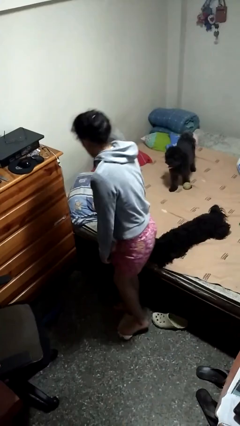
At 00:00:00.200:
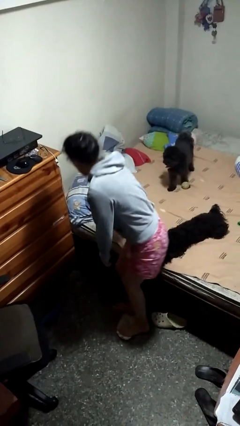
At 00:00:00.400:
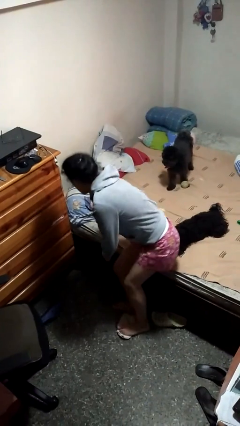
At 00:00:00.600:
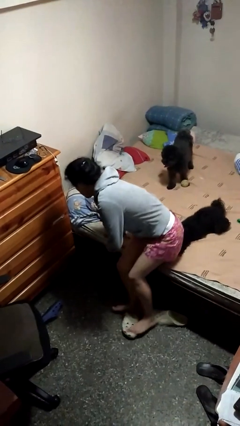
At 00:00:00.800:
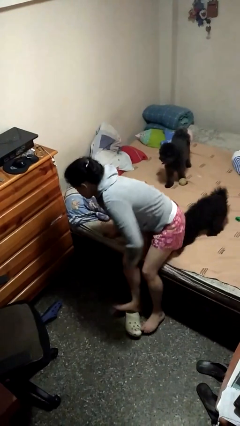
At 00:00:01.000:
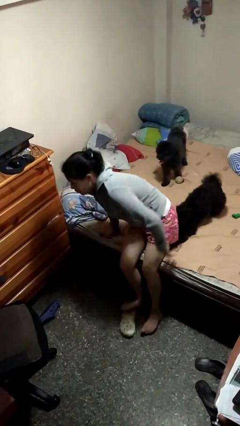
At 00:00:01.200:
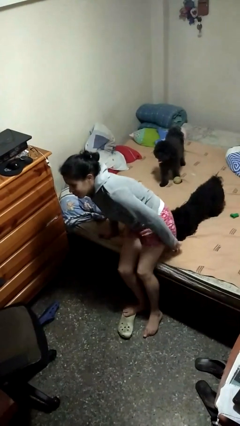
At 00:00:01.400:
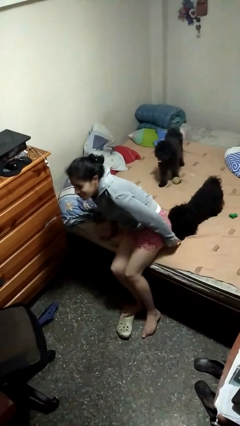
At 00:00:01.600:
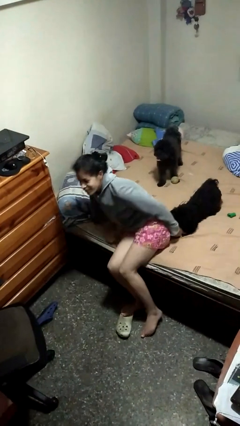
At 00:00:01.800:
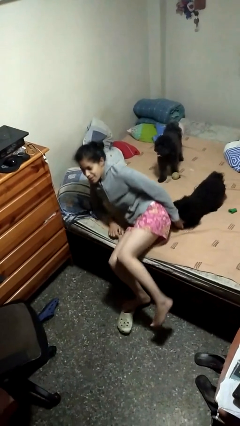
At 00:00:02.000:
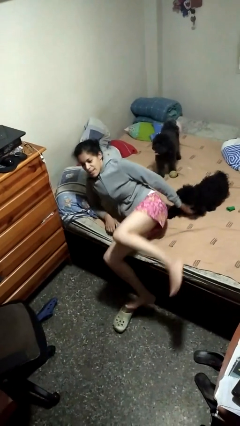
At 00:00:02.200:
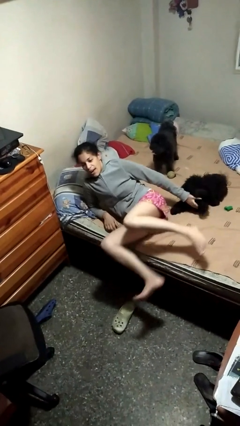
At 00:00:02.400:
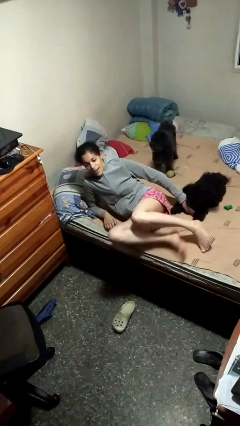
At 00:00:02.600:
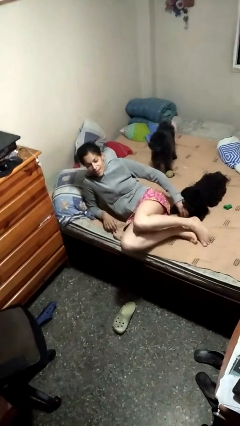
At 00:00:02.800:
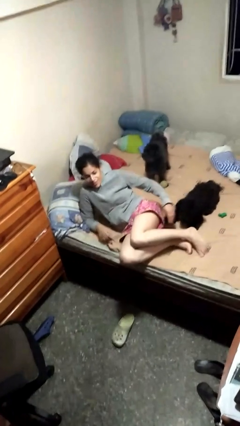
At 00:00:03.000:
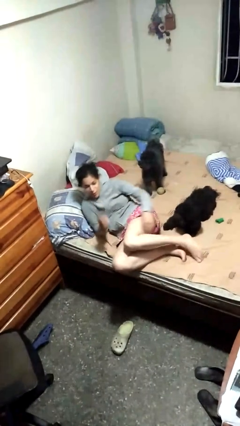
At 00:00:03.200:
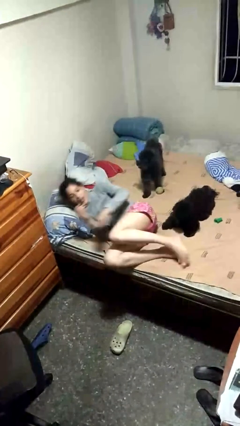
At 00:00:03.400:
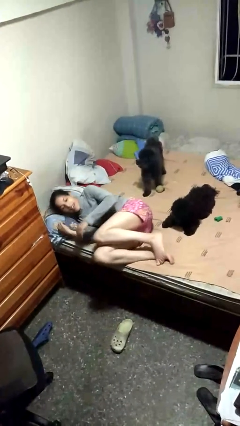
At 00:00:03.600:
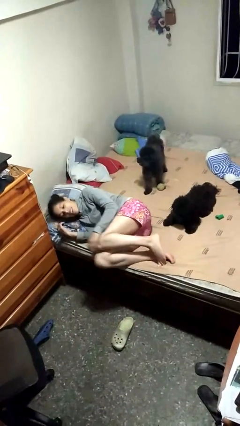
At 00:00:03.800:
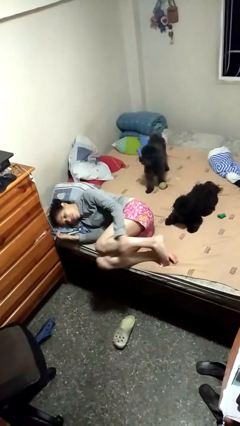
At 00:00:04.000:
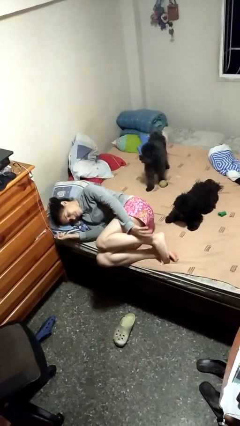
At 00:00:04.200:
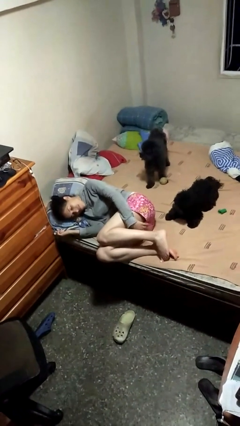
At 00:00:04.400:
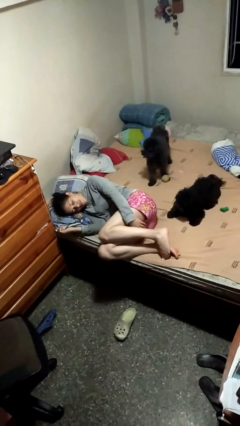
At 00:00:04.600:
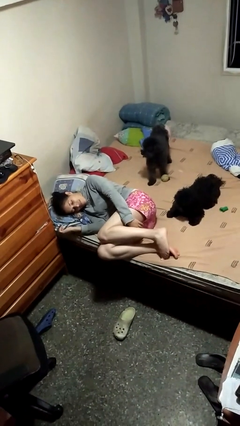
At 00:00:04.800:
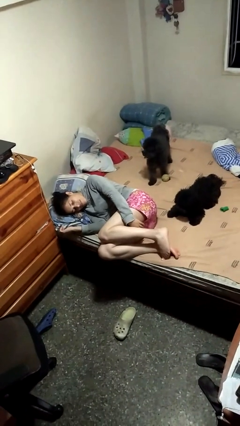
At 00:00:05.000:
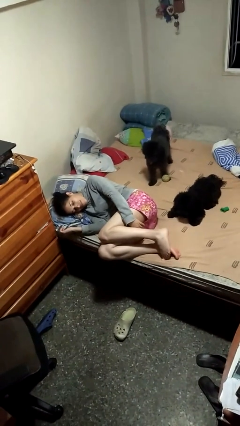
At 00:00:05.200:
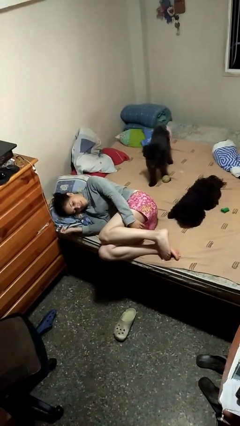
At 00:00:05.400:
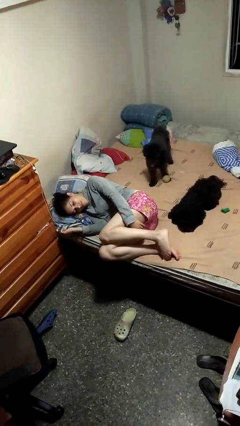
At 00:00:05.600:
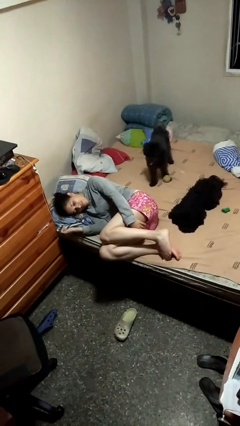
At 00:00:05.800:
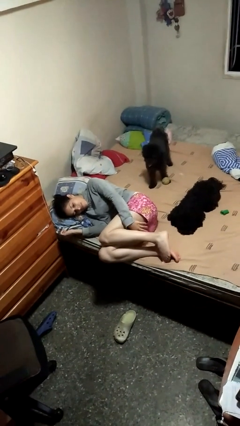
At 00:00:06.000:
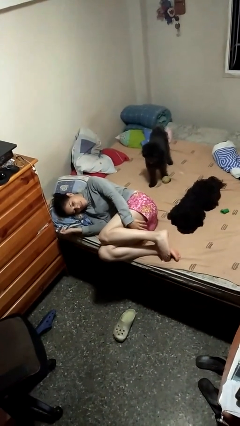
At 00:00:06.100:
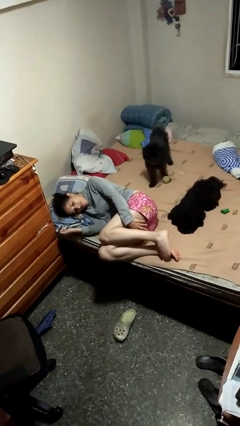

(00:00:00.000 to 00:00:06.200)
person lies down on bed

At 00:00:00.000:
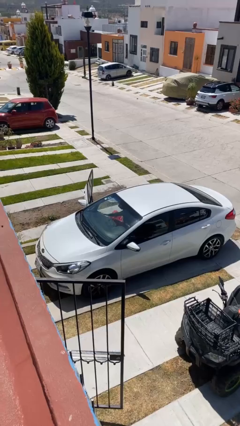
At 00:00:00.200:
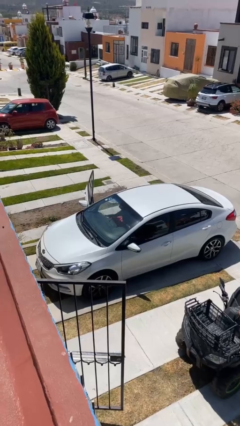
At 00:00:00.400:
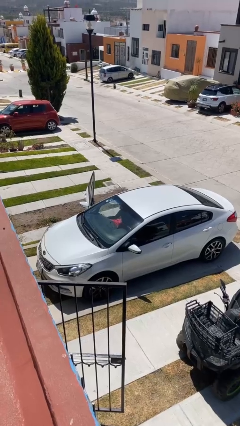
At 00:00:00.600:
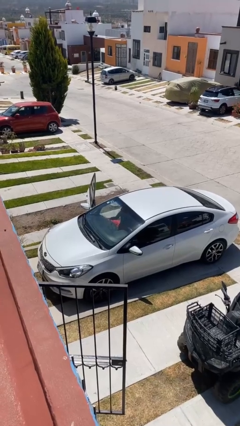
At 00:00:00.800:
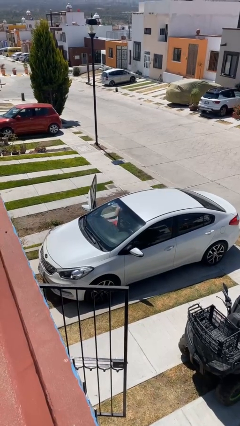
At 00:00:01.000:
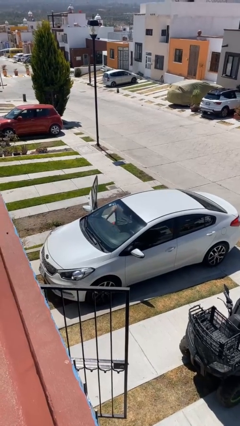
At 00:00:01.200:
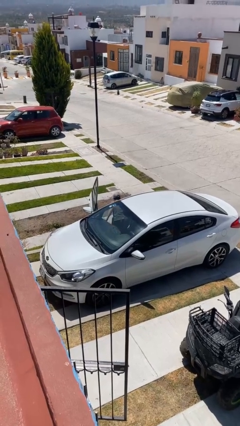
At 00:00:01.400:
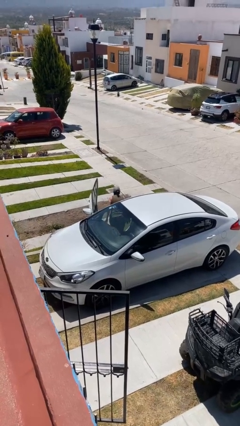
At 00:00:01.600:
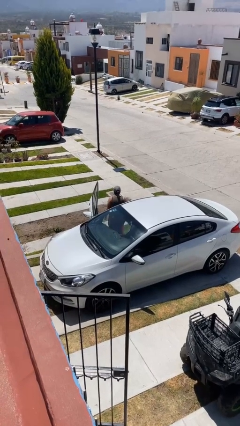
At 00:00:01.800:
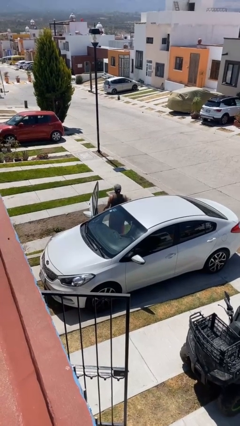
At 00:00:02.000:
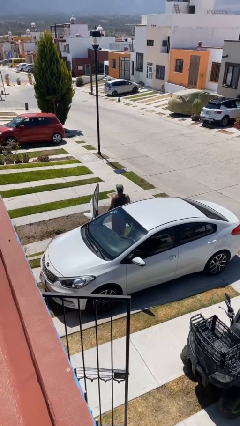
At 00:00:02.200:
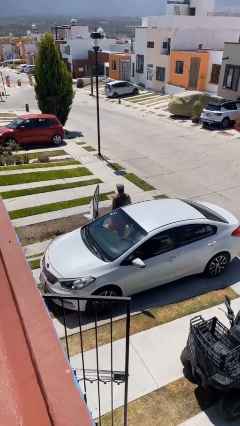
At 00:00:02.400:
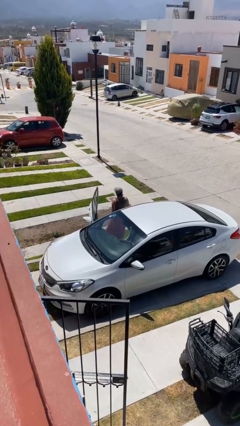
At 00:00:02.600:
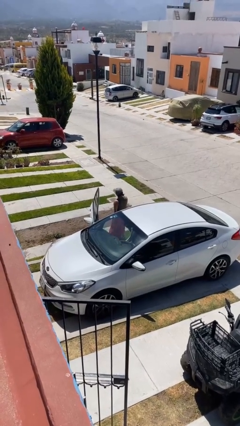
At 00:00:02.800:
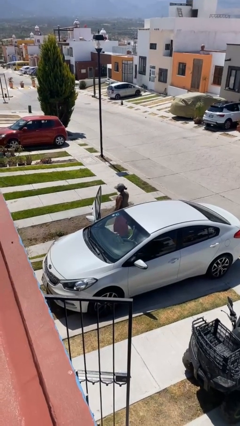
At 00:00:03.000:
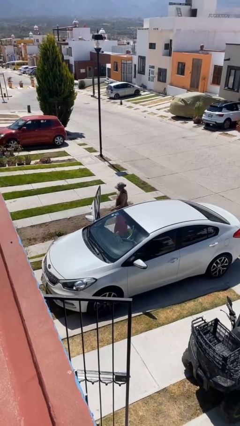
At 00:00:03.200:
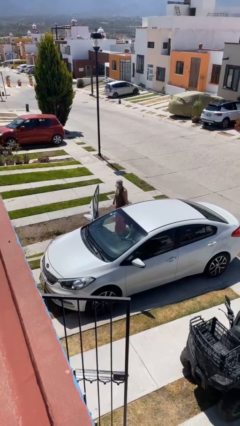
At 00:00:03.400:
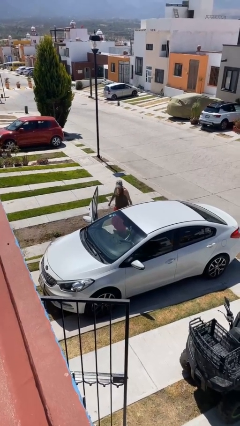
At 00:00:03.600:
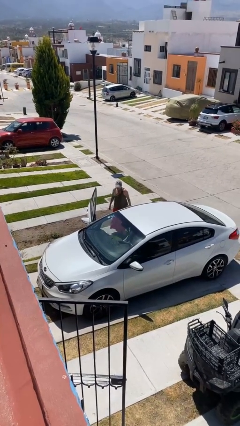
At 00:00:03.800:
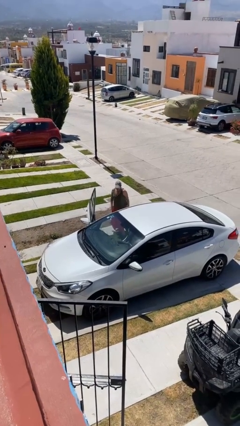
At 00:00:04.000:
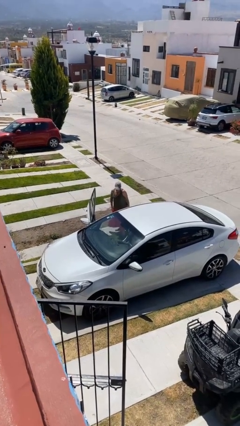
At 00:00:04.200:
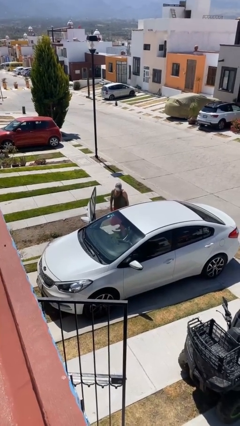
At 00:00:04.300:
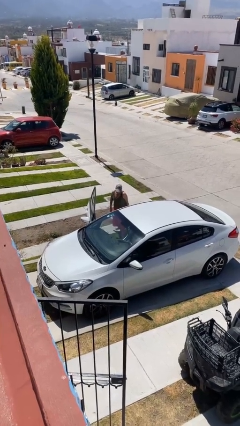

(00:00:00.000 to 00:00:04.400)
person exits car

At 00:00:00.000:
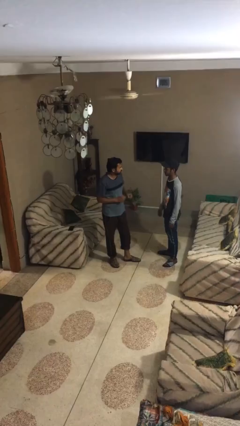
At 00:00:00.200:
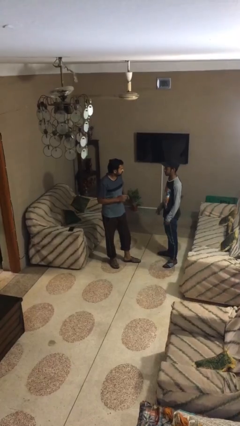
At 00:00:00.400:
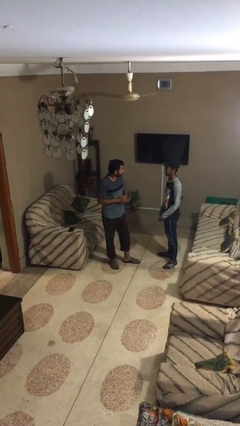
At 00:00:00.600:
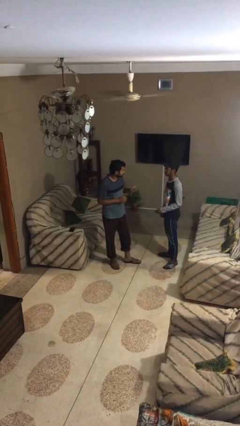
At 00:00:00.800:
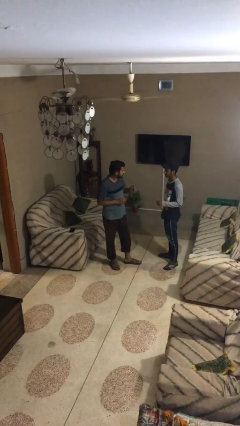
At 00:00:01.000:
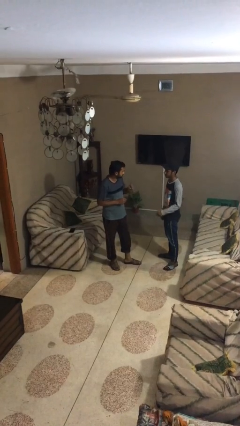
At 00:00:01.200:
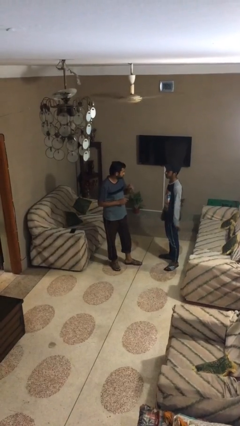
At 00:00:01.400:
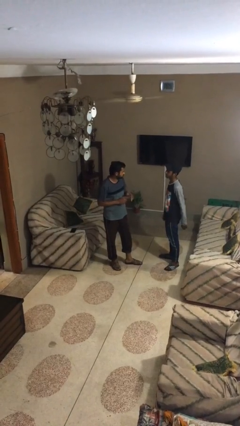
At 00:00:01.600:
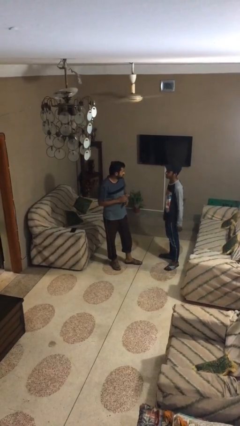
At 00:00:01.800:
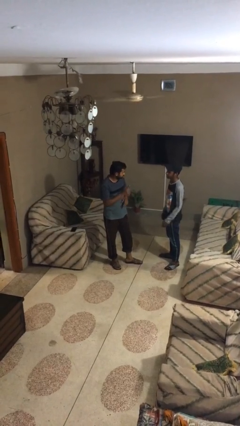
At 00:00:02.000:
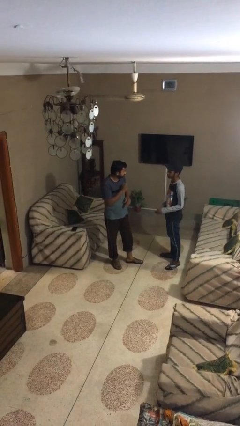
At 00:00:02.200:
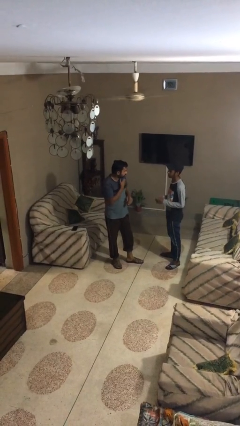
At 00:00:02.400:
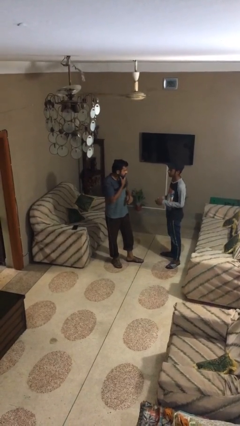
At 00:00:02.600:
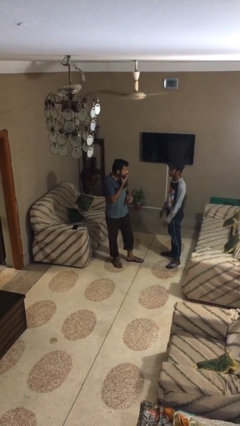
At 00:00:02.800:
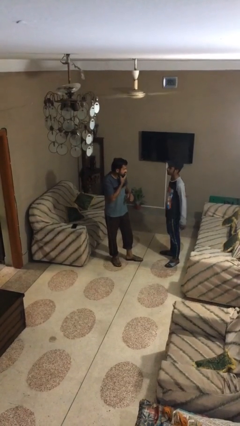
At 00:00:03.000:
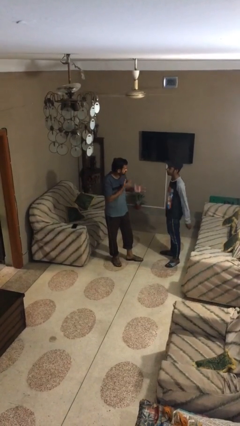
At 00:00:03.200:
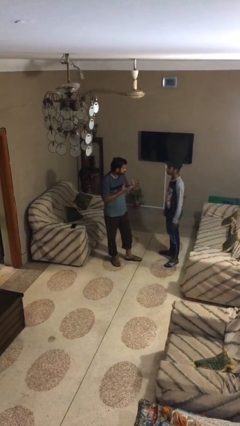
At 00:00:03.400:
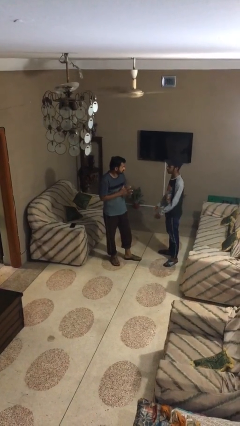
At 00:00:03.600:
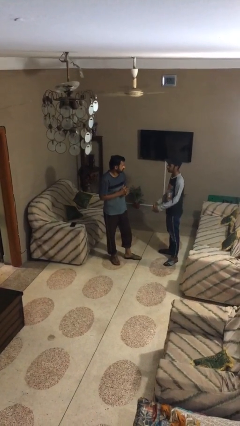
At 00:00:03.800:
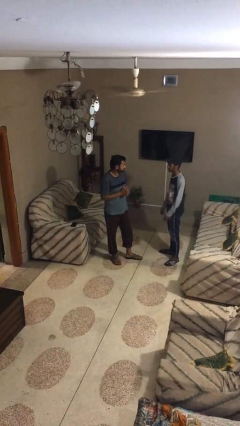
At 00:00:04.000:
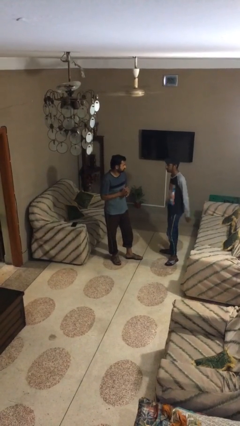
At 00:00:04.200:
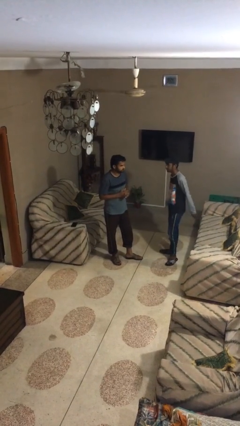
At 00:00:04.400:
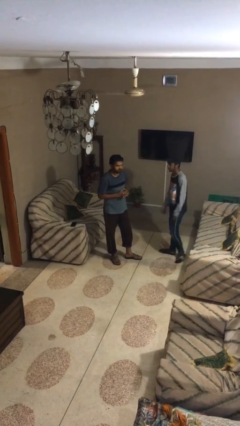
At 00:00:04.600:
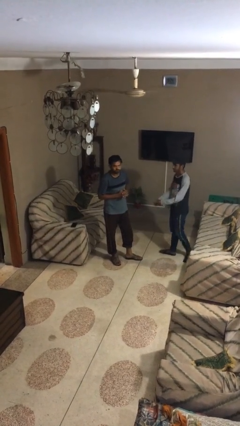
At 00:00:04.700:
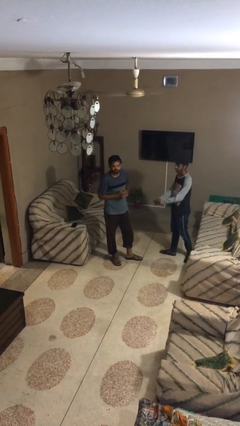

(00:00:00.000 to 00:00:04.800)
person talks to person

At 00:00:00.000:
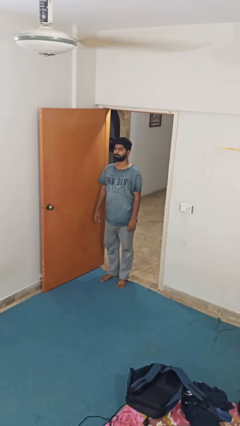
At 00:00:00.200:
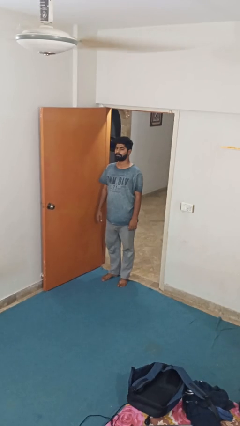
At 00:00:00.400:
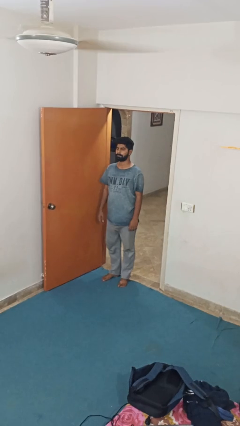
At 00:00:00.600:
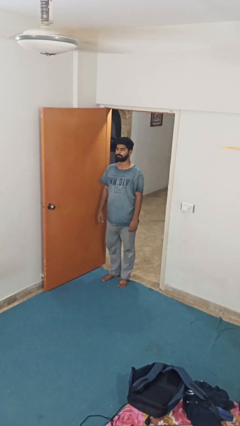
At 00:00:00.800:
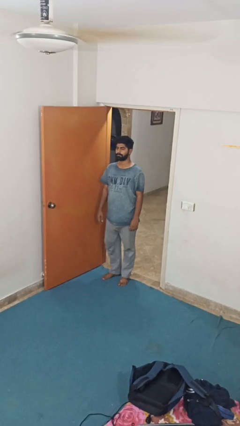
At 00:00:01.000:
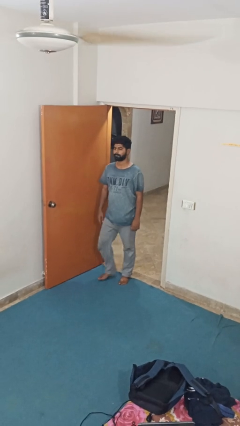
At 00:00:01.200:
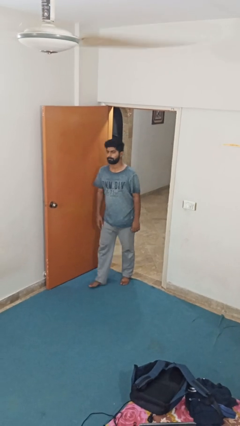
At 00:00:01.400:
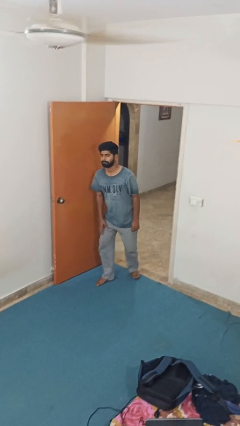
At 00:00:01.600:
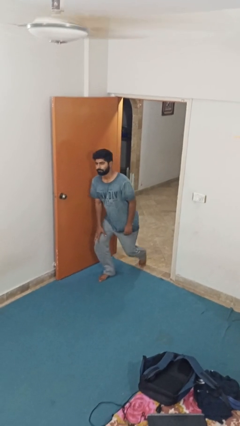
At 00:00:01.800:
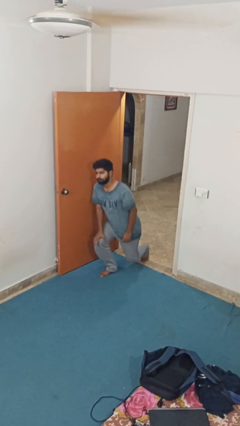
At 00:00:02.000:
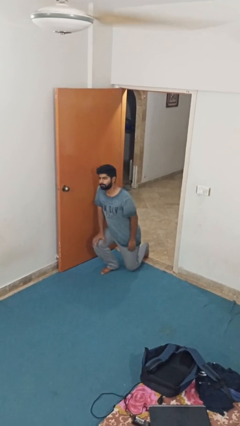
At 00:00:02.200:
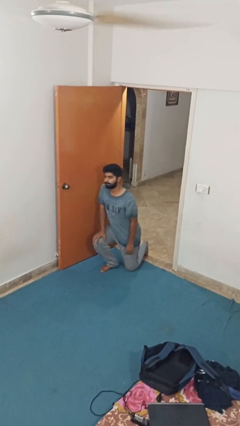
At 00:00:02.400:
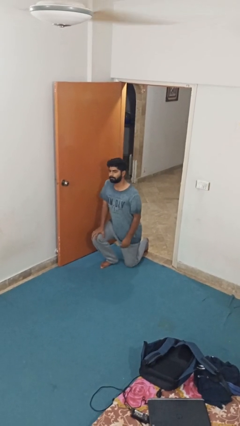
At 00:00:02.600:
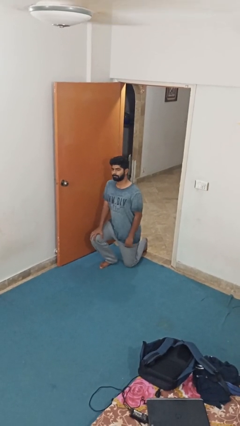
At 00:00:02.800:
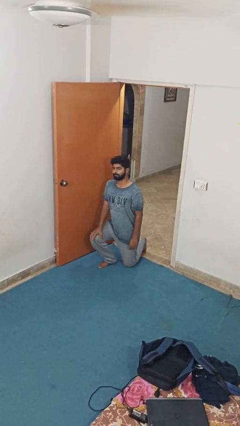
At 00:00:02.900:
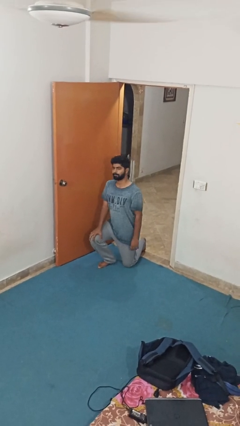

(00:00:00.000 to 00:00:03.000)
person kneels
